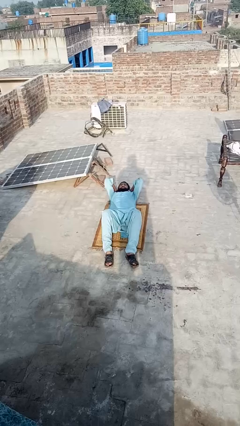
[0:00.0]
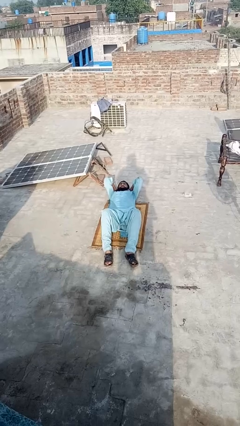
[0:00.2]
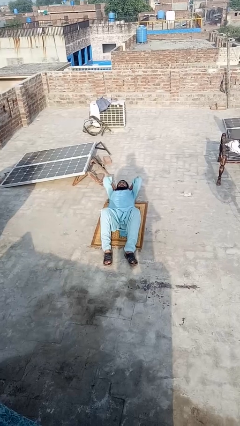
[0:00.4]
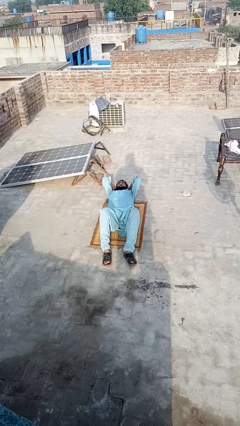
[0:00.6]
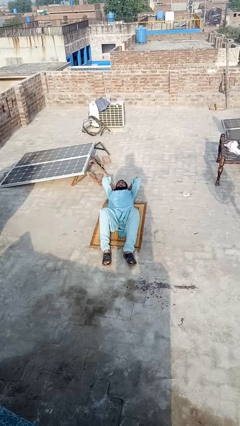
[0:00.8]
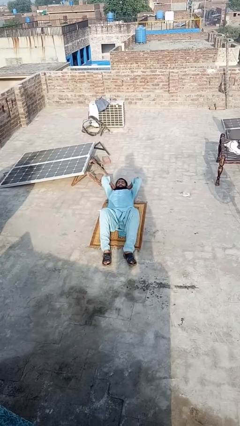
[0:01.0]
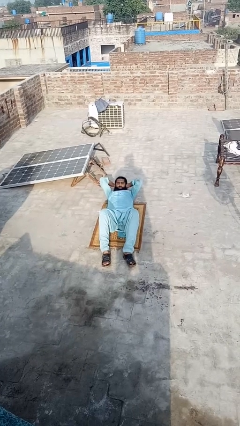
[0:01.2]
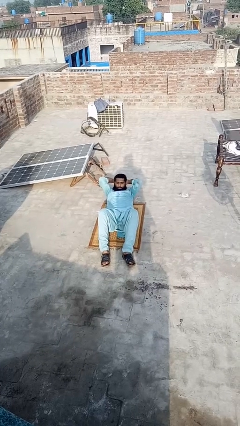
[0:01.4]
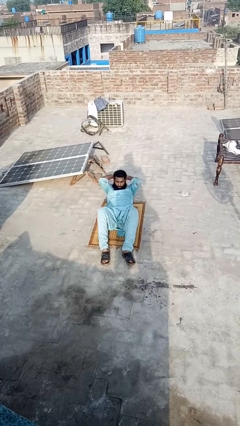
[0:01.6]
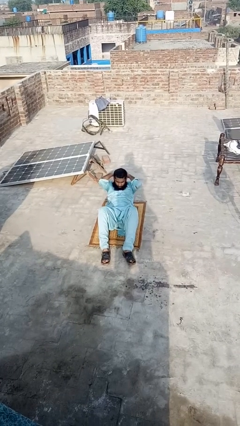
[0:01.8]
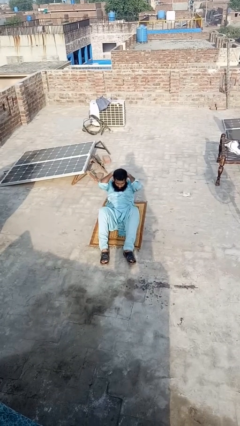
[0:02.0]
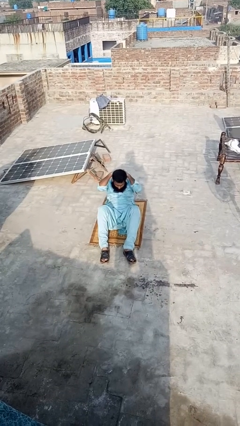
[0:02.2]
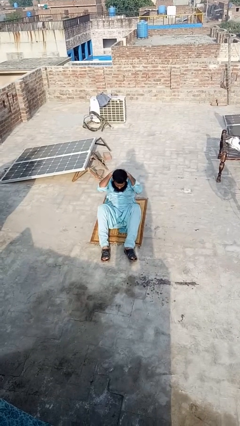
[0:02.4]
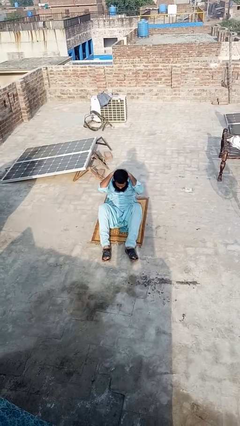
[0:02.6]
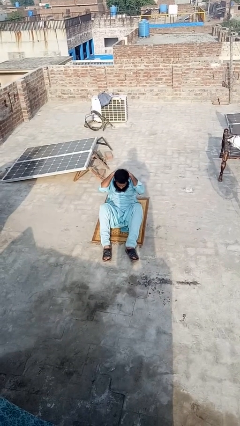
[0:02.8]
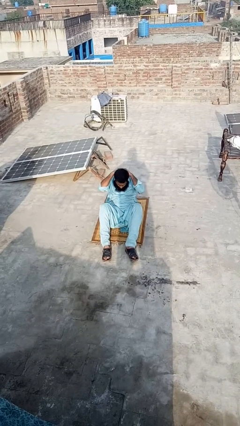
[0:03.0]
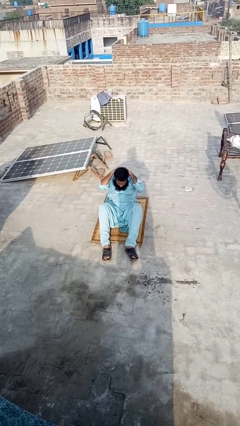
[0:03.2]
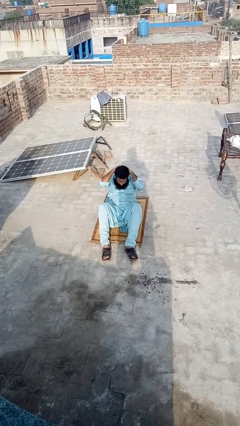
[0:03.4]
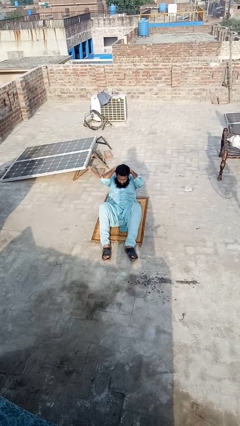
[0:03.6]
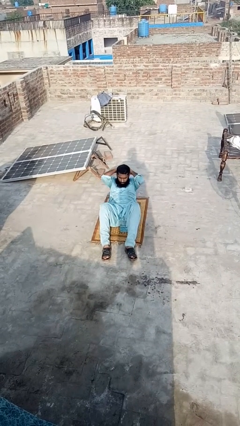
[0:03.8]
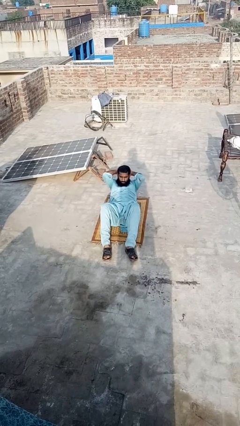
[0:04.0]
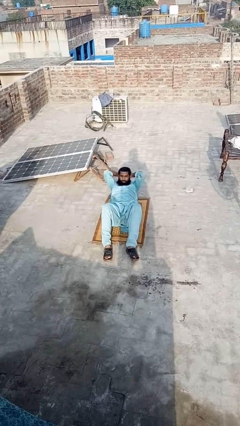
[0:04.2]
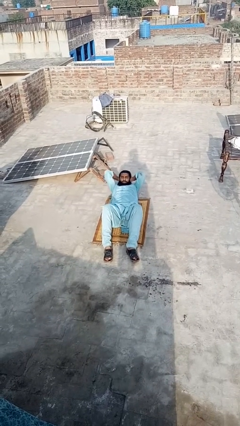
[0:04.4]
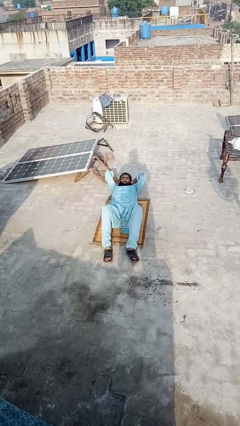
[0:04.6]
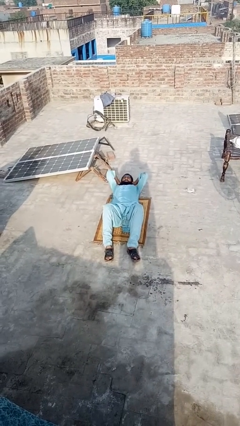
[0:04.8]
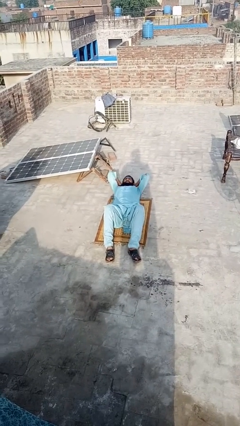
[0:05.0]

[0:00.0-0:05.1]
person exercises with situp

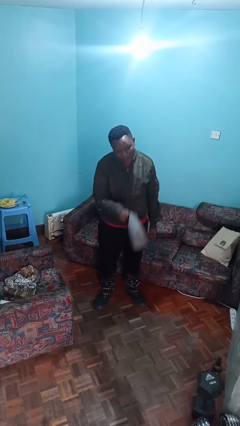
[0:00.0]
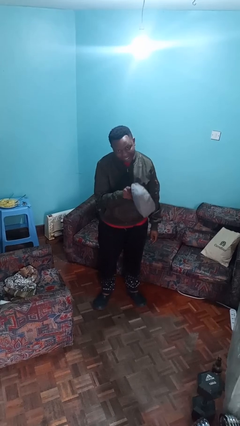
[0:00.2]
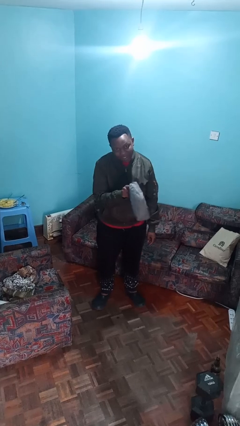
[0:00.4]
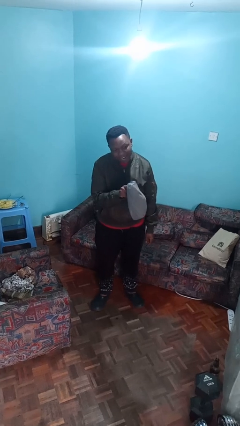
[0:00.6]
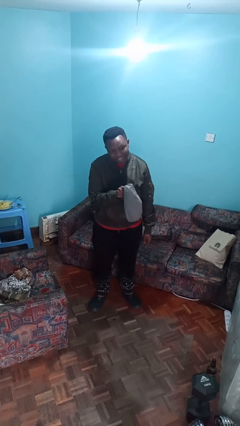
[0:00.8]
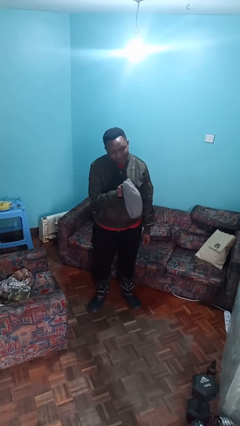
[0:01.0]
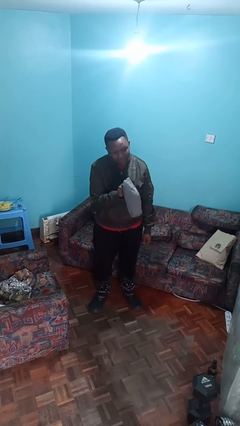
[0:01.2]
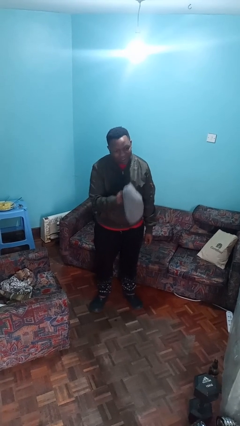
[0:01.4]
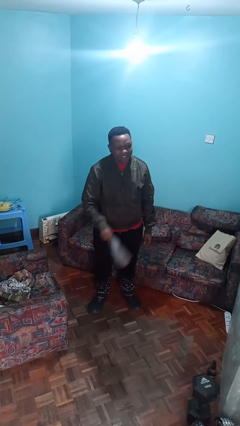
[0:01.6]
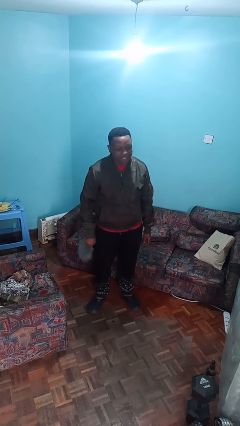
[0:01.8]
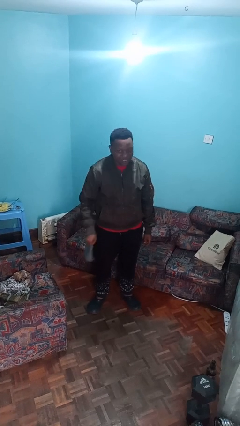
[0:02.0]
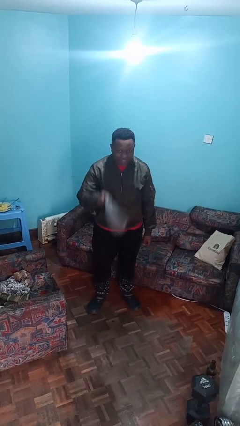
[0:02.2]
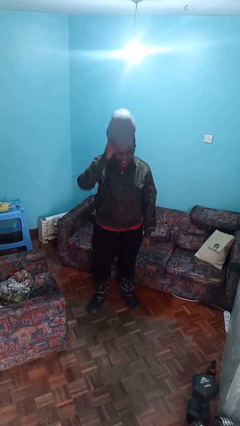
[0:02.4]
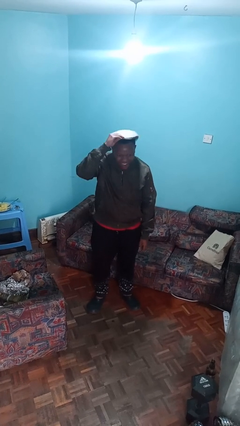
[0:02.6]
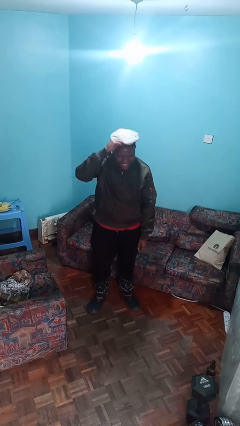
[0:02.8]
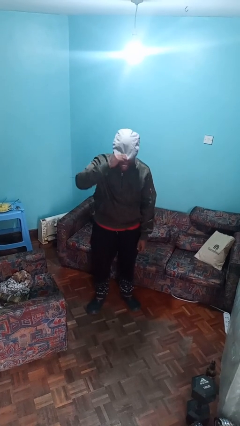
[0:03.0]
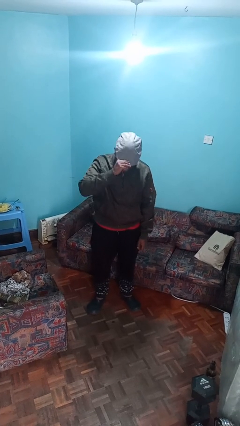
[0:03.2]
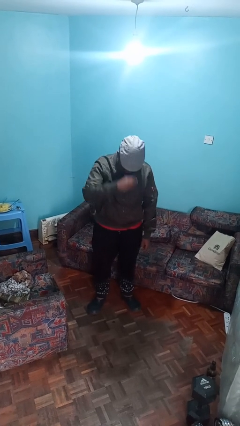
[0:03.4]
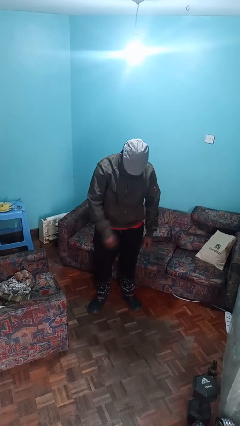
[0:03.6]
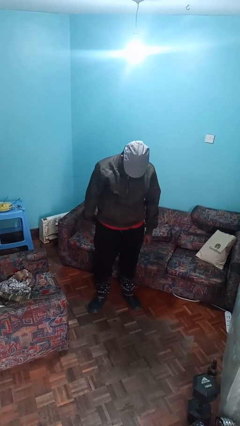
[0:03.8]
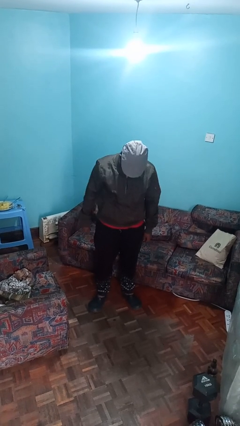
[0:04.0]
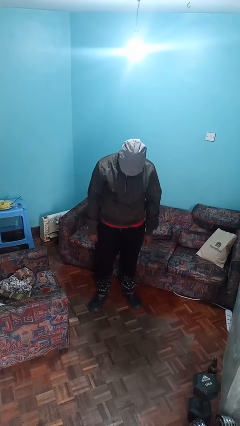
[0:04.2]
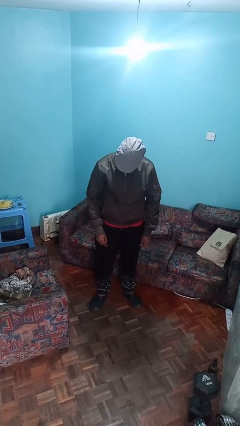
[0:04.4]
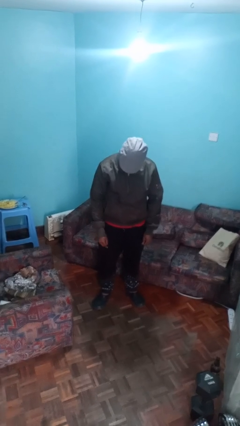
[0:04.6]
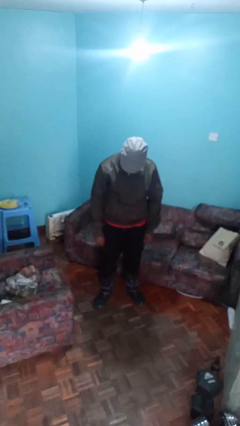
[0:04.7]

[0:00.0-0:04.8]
person puts on hat

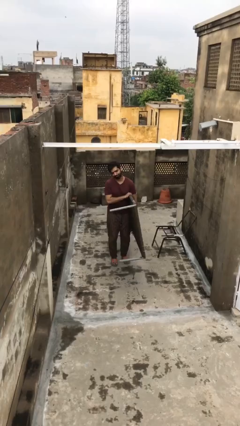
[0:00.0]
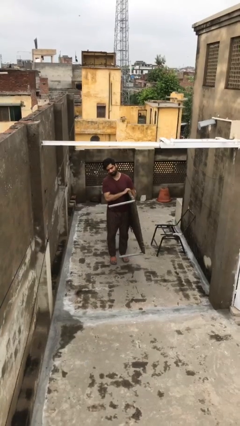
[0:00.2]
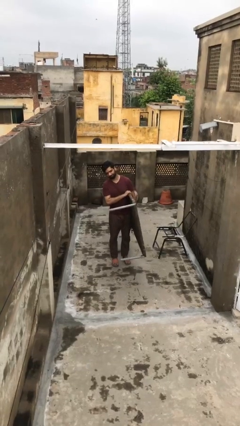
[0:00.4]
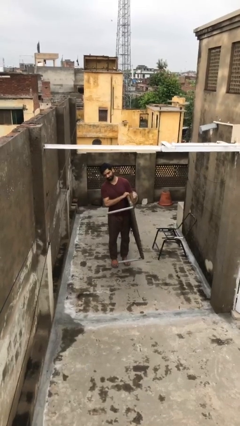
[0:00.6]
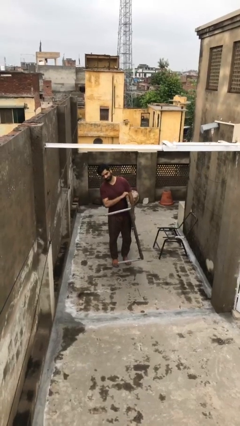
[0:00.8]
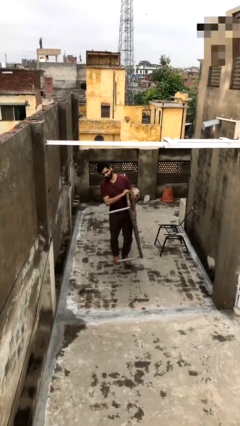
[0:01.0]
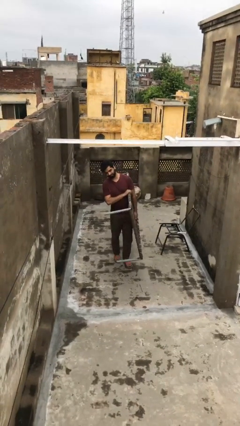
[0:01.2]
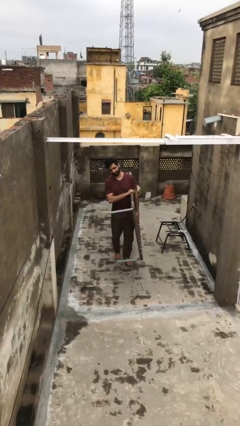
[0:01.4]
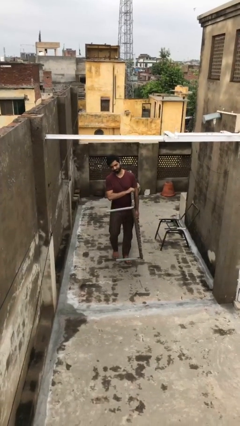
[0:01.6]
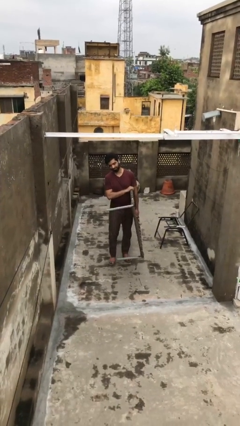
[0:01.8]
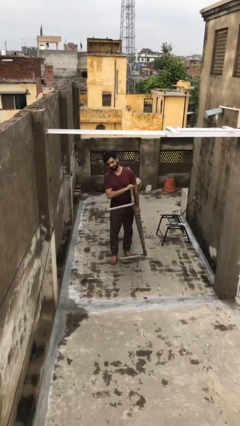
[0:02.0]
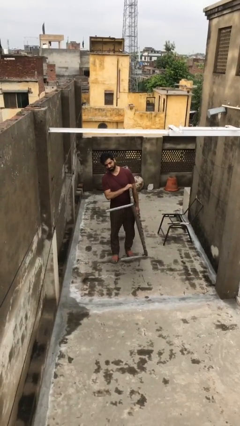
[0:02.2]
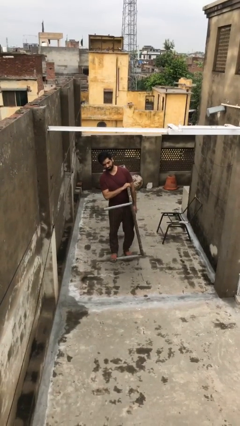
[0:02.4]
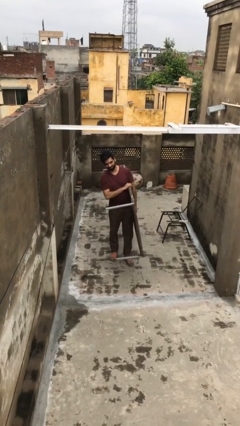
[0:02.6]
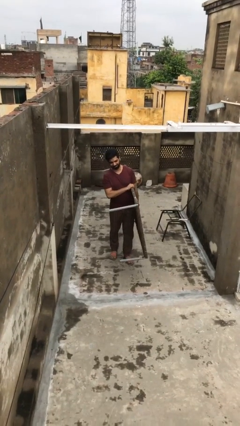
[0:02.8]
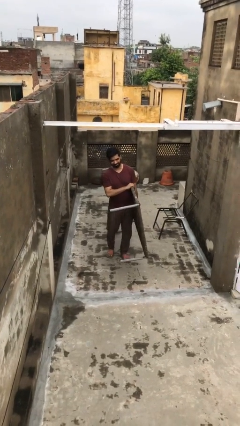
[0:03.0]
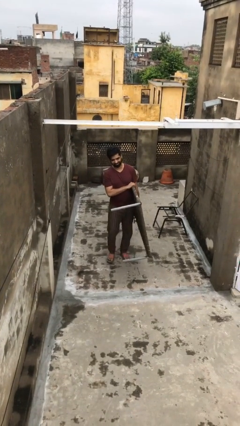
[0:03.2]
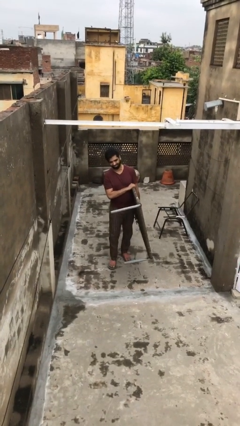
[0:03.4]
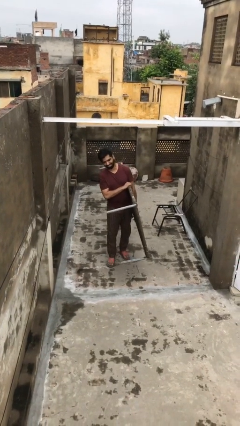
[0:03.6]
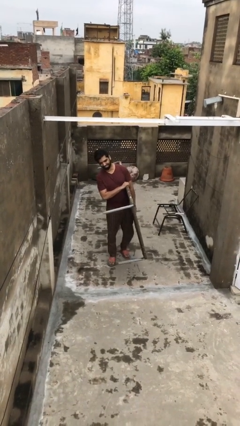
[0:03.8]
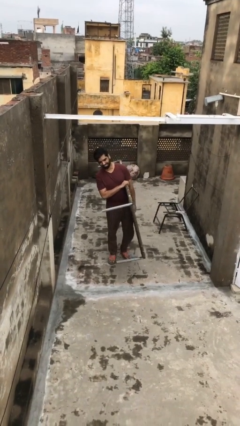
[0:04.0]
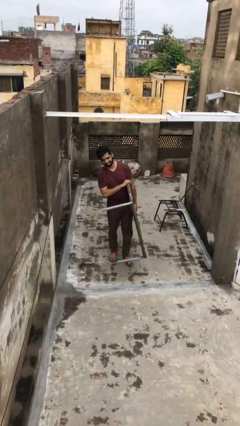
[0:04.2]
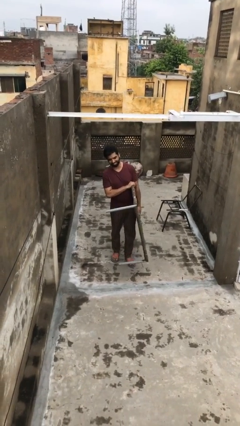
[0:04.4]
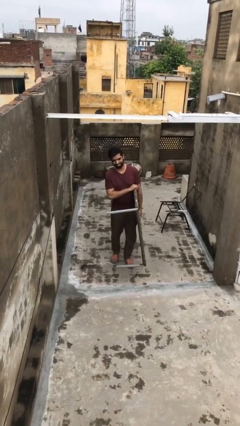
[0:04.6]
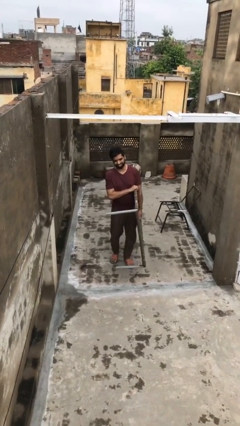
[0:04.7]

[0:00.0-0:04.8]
person carries heavy object

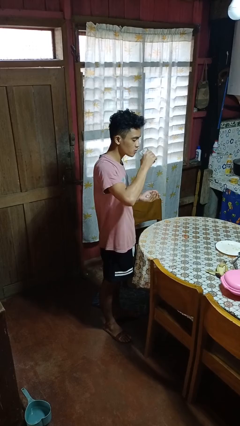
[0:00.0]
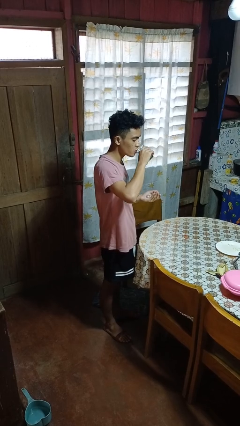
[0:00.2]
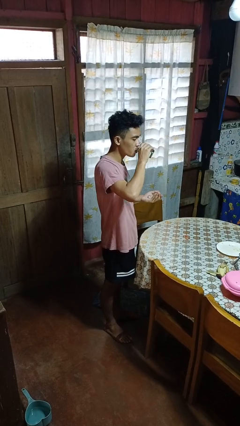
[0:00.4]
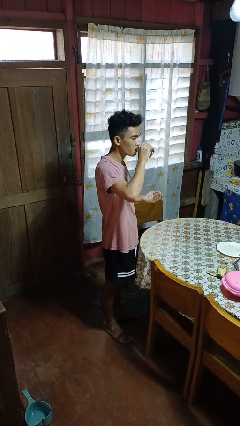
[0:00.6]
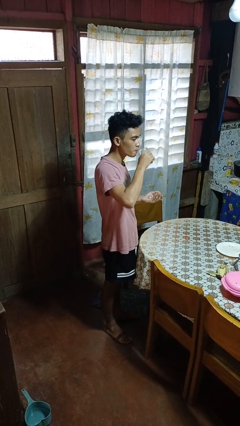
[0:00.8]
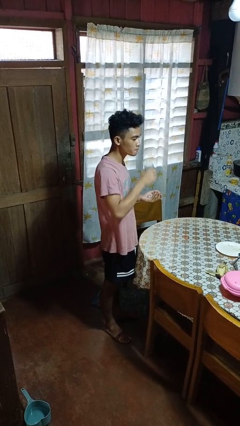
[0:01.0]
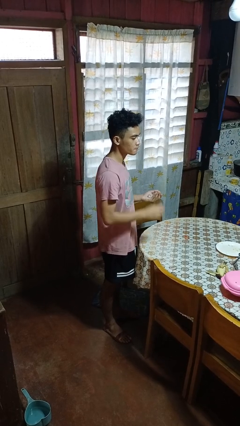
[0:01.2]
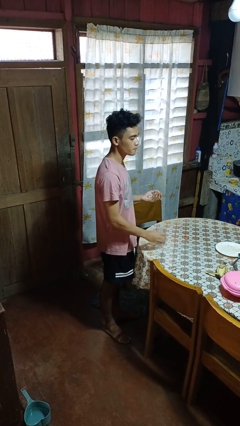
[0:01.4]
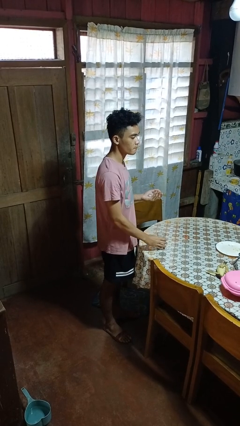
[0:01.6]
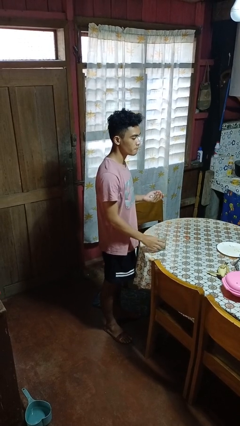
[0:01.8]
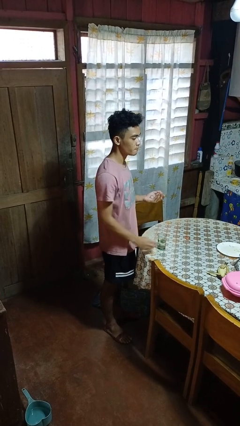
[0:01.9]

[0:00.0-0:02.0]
person drinks from cup

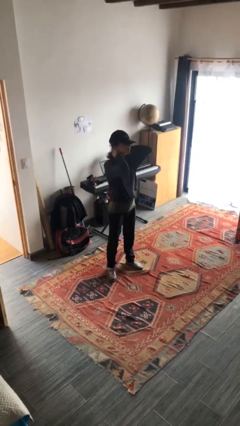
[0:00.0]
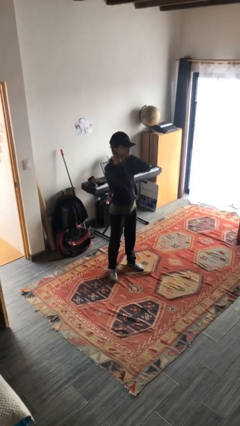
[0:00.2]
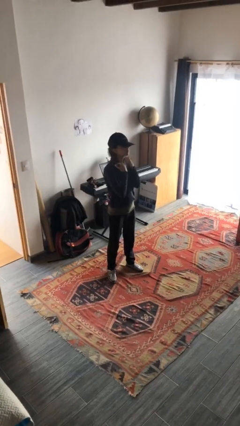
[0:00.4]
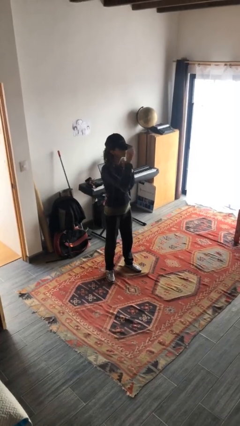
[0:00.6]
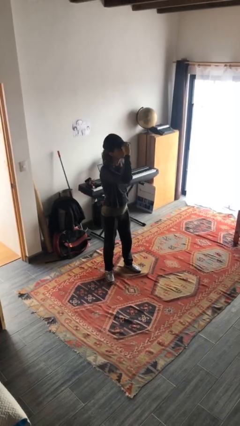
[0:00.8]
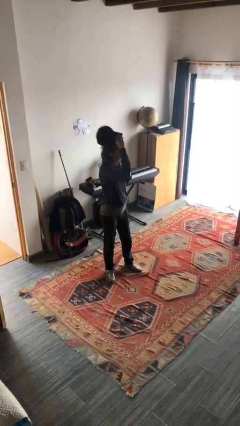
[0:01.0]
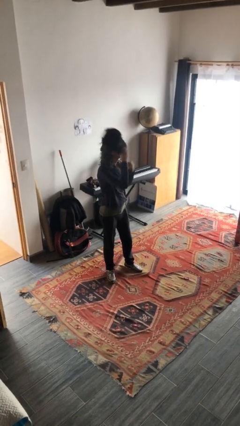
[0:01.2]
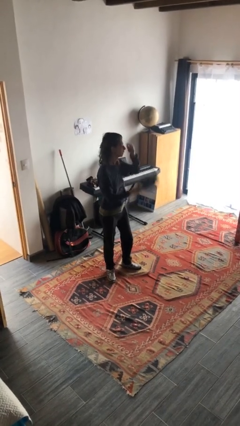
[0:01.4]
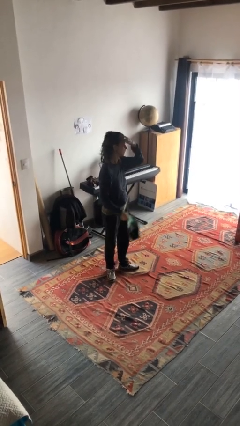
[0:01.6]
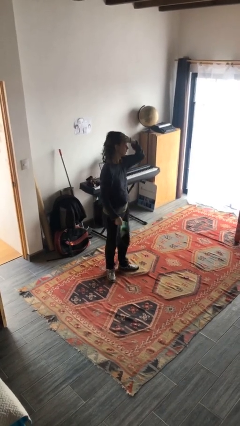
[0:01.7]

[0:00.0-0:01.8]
person takes off hat
